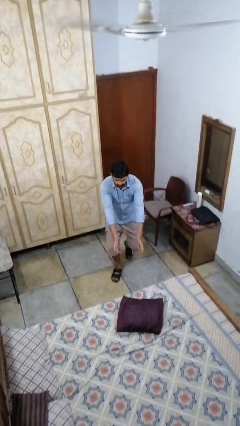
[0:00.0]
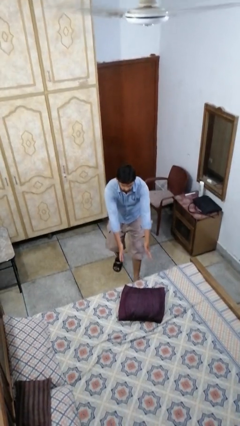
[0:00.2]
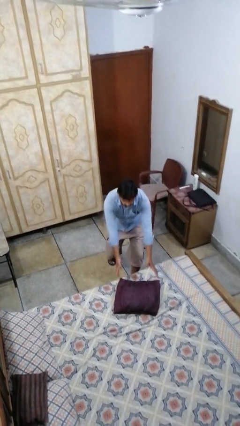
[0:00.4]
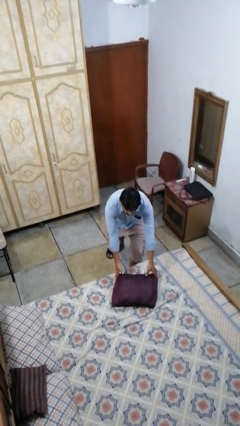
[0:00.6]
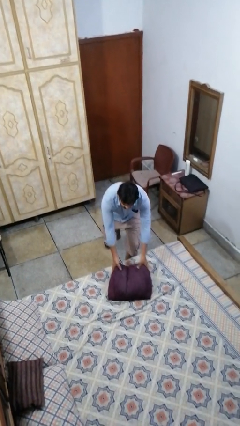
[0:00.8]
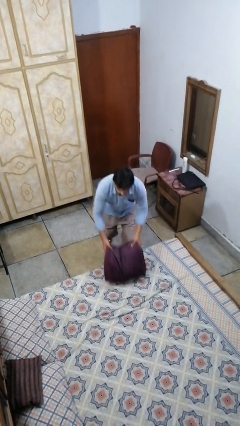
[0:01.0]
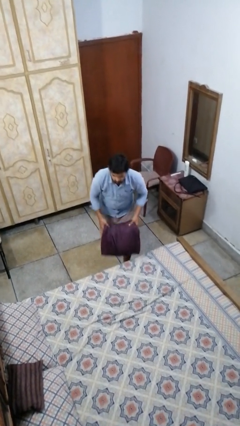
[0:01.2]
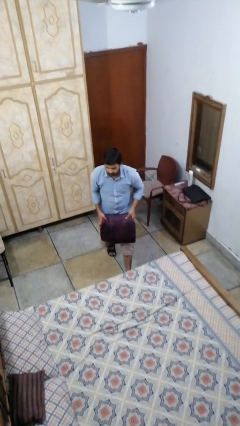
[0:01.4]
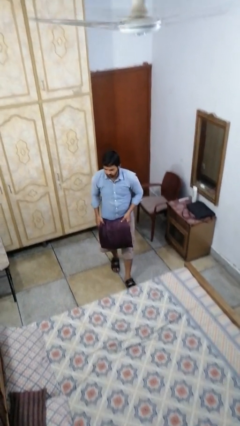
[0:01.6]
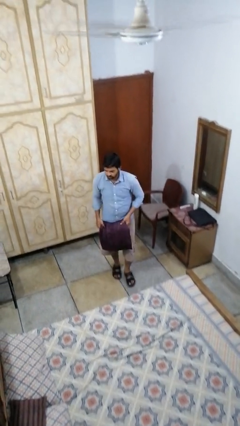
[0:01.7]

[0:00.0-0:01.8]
person picks up object from bed

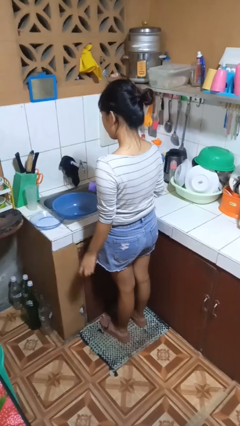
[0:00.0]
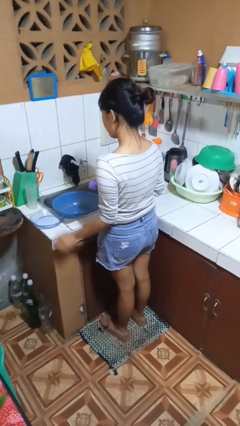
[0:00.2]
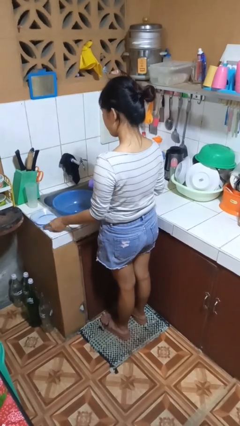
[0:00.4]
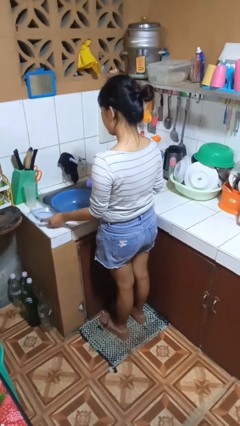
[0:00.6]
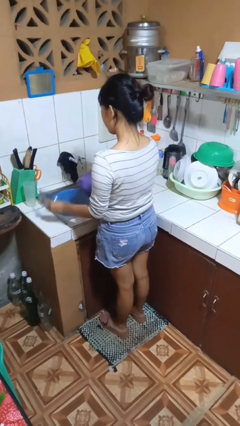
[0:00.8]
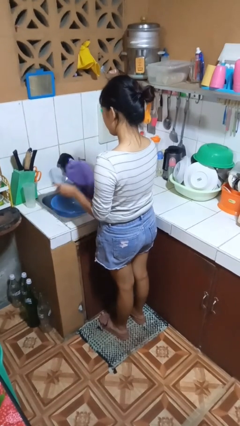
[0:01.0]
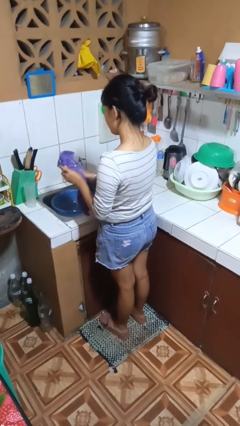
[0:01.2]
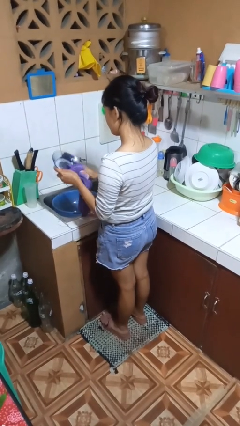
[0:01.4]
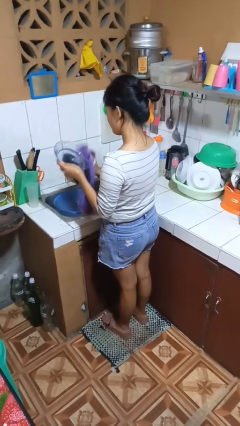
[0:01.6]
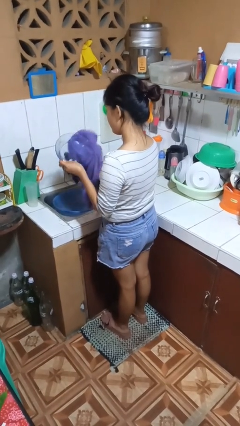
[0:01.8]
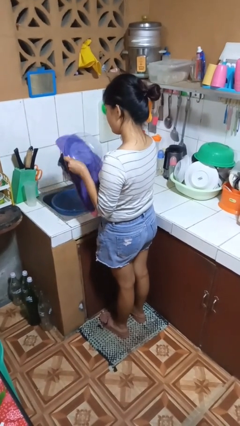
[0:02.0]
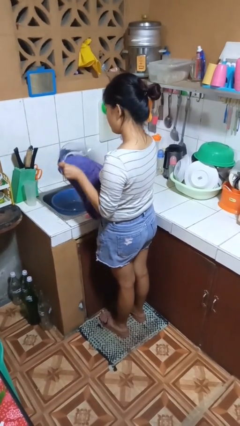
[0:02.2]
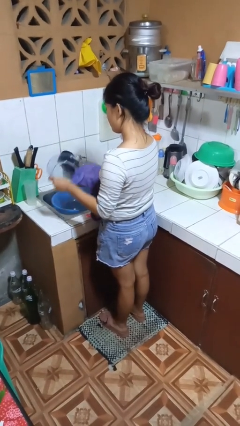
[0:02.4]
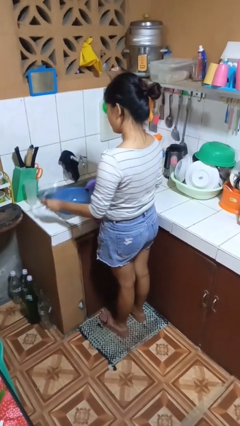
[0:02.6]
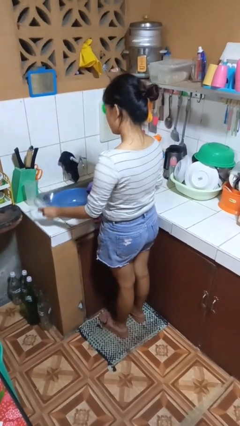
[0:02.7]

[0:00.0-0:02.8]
person dries dish

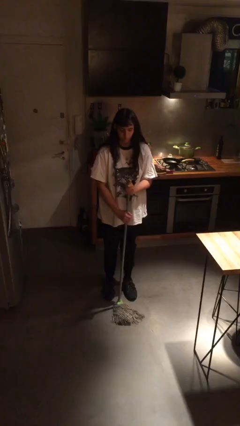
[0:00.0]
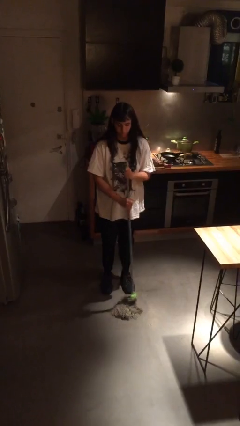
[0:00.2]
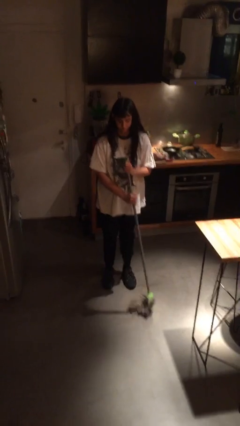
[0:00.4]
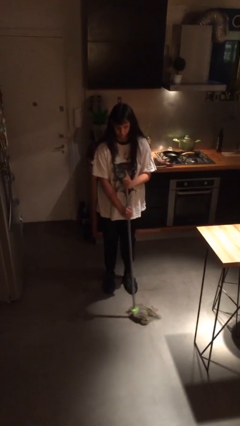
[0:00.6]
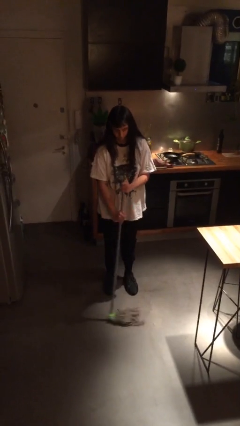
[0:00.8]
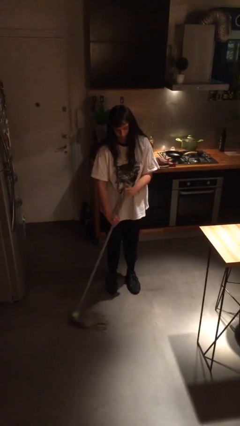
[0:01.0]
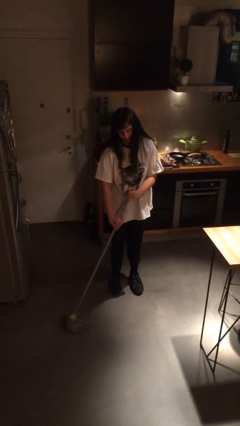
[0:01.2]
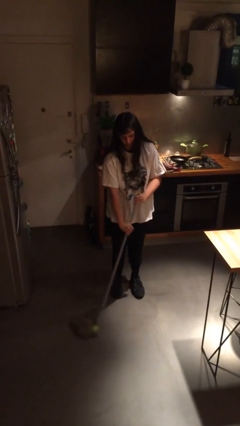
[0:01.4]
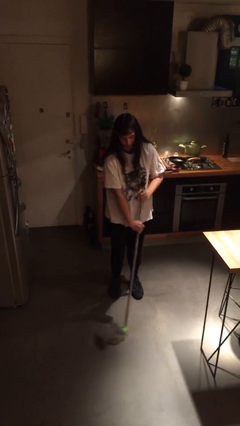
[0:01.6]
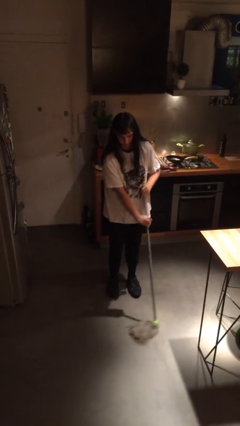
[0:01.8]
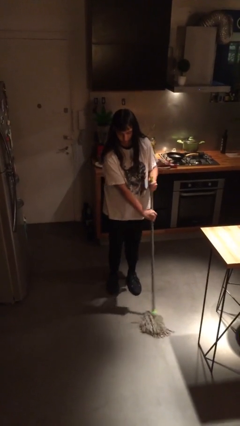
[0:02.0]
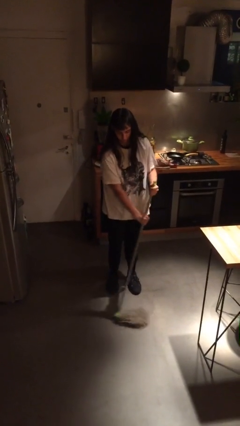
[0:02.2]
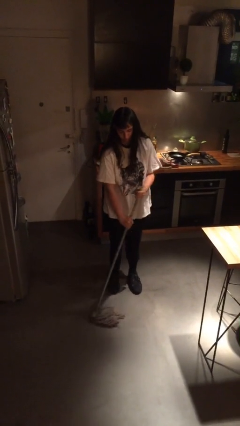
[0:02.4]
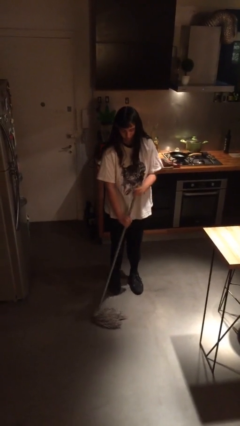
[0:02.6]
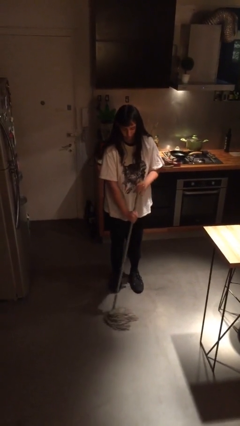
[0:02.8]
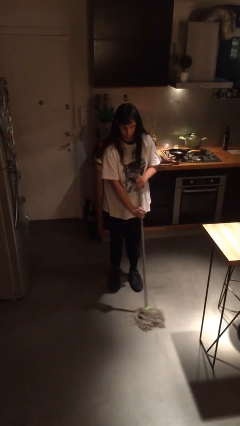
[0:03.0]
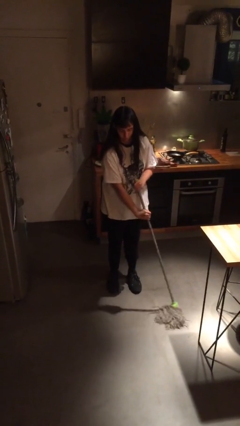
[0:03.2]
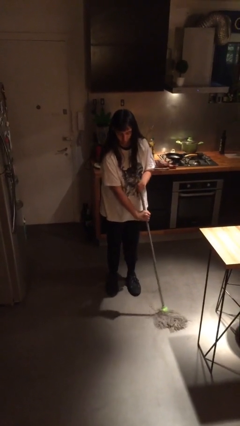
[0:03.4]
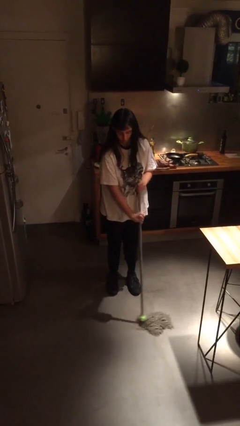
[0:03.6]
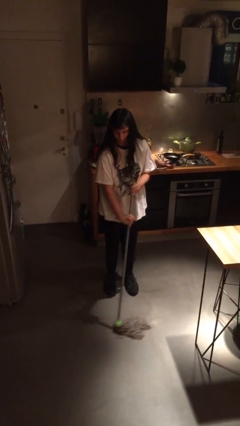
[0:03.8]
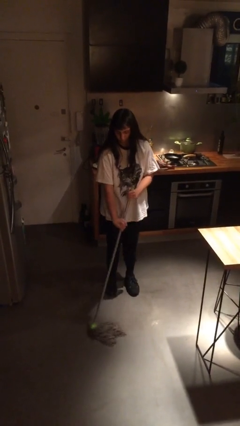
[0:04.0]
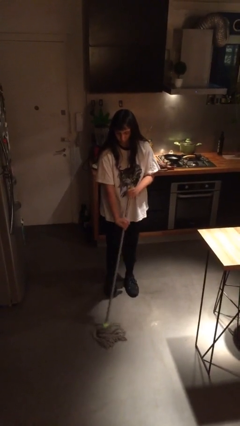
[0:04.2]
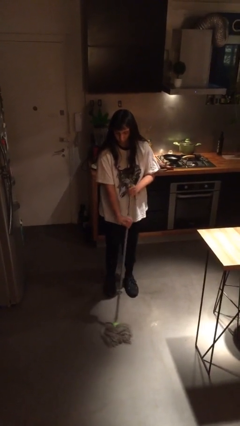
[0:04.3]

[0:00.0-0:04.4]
person mops

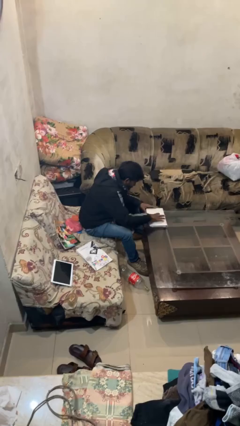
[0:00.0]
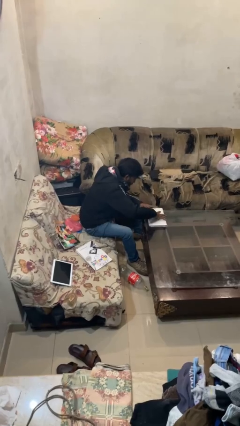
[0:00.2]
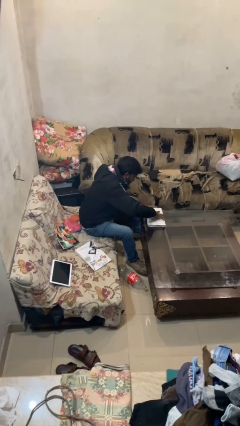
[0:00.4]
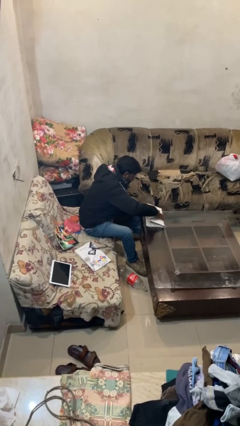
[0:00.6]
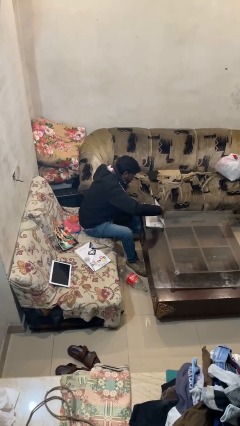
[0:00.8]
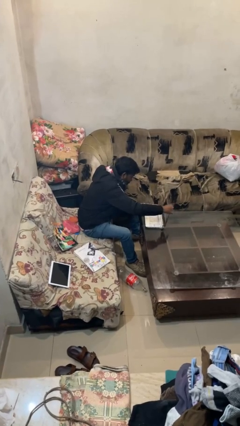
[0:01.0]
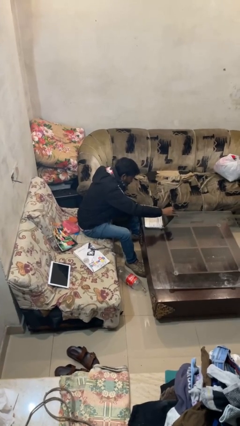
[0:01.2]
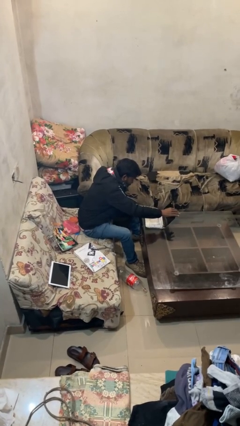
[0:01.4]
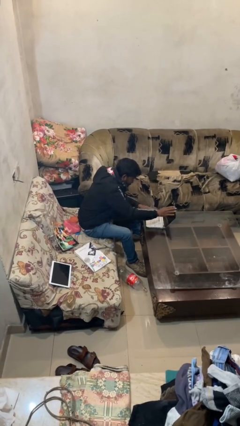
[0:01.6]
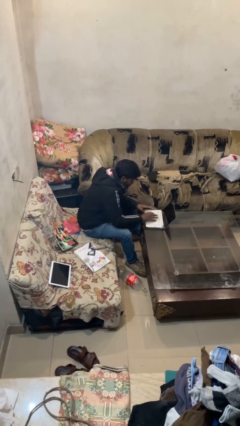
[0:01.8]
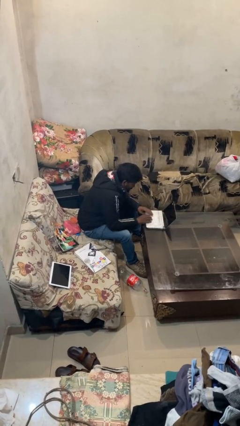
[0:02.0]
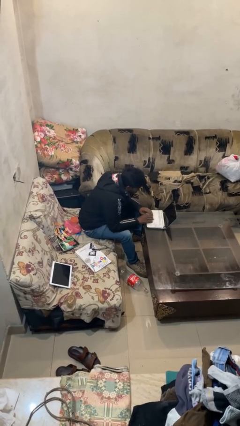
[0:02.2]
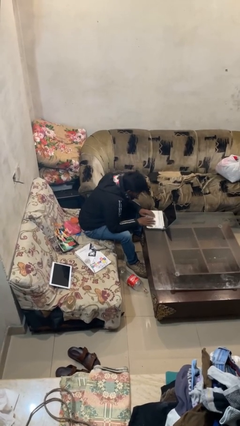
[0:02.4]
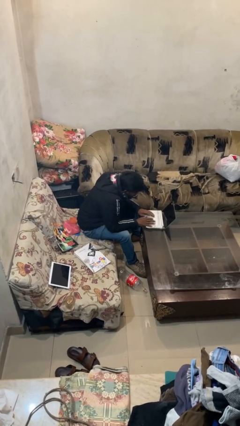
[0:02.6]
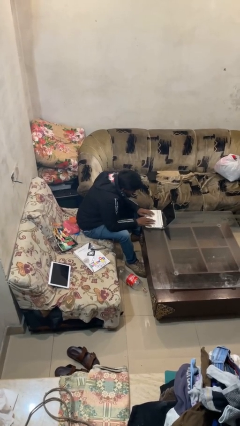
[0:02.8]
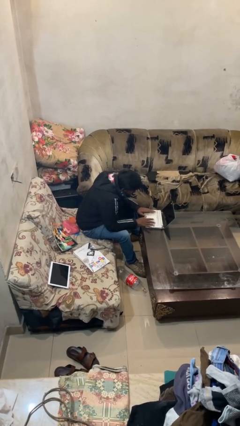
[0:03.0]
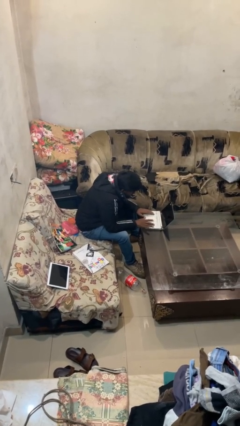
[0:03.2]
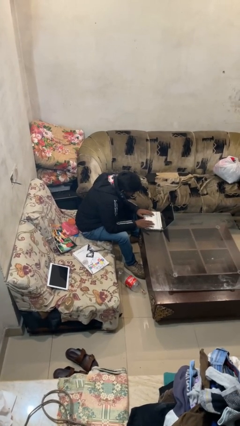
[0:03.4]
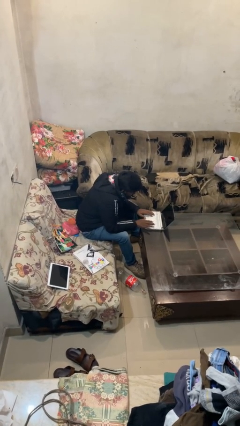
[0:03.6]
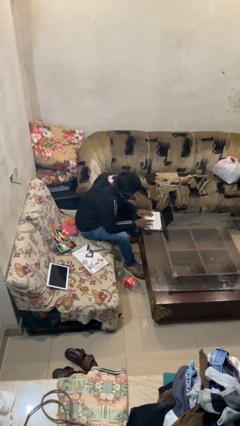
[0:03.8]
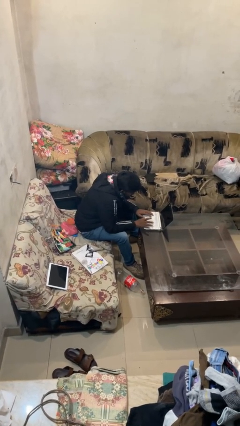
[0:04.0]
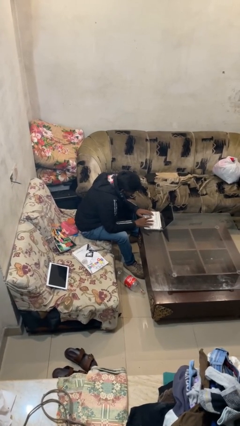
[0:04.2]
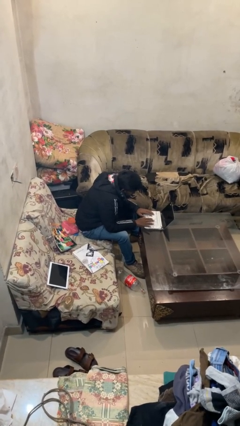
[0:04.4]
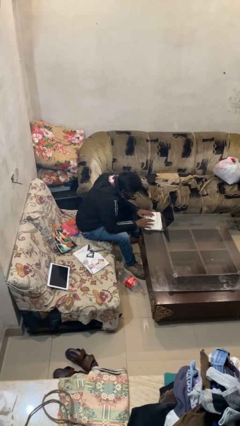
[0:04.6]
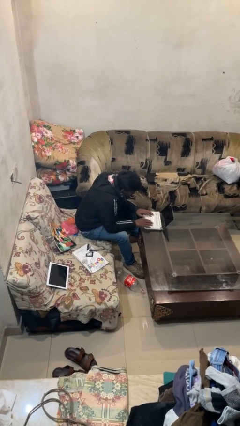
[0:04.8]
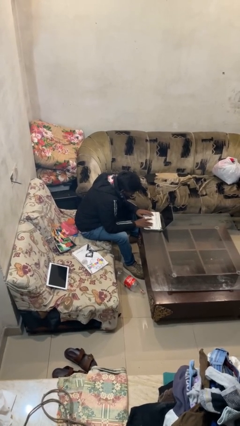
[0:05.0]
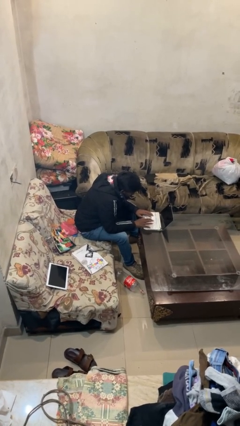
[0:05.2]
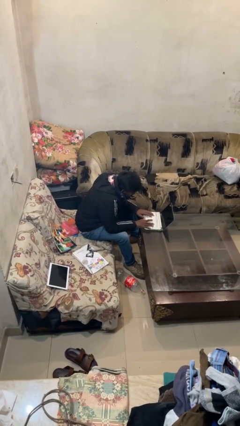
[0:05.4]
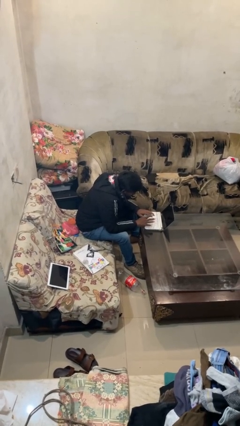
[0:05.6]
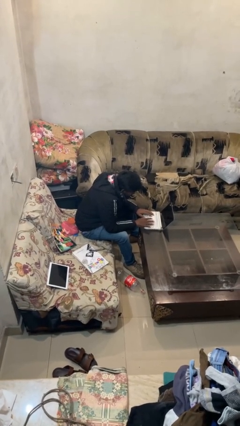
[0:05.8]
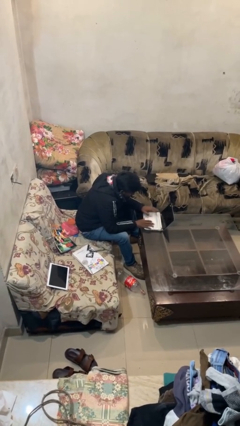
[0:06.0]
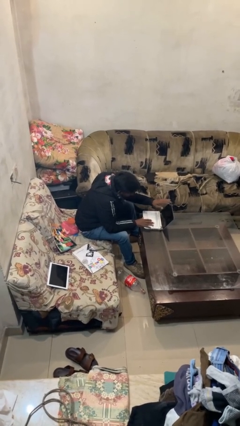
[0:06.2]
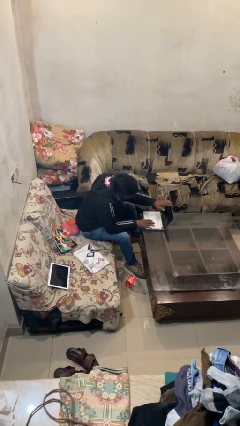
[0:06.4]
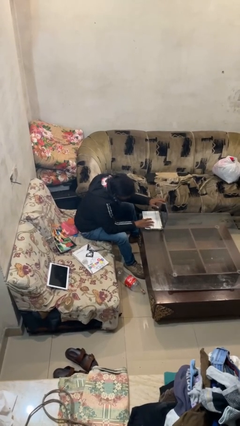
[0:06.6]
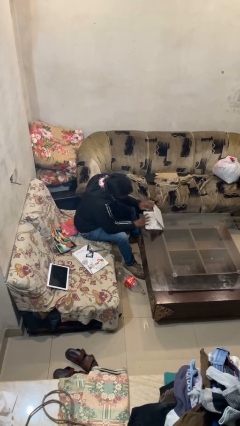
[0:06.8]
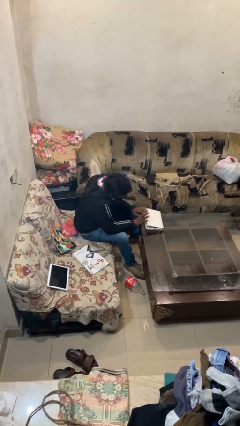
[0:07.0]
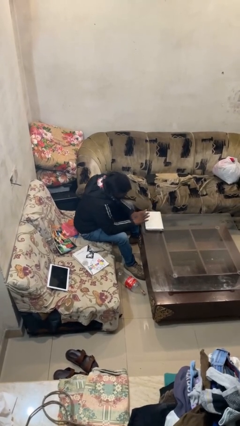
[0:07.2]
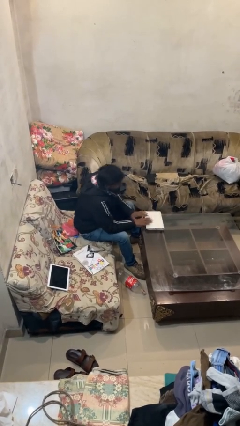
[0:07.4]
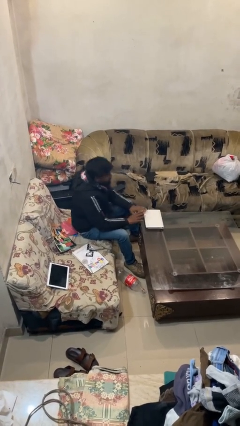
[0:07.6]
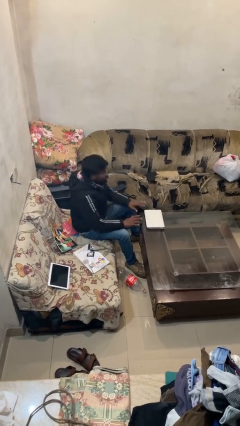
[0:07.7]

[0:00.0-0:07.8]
person interacts with laptop

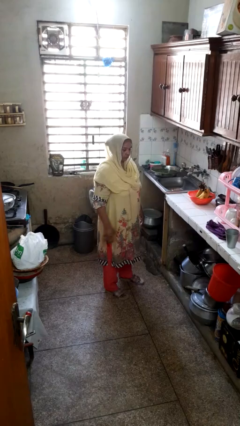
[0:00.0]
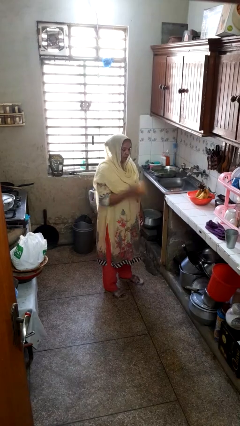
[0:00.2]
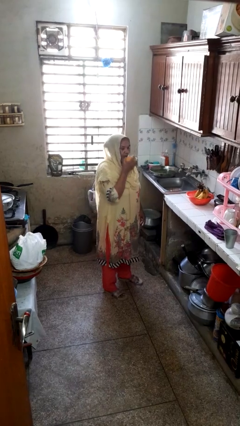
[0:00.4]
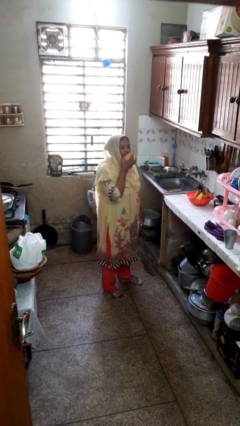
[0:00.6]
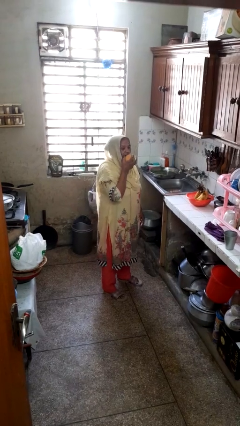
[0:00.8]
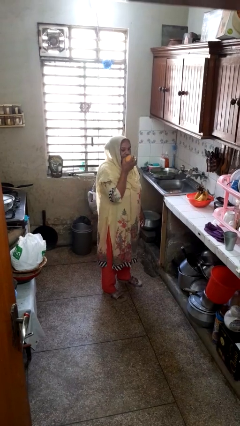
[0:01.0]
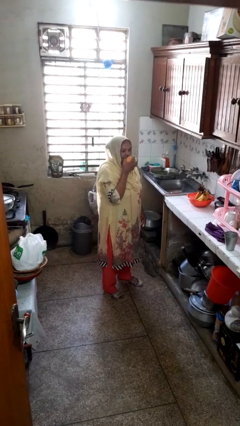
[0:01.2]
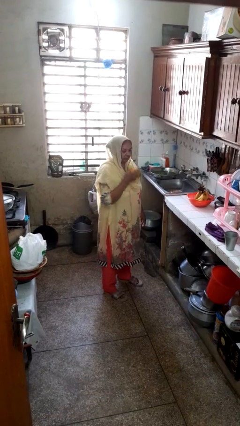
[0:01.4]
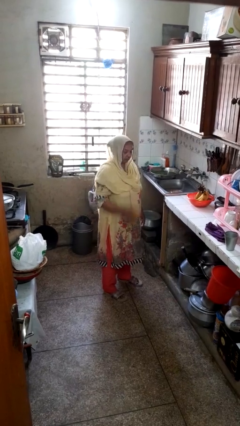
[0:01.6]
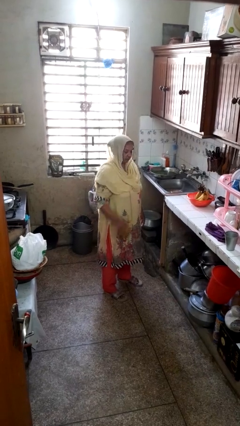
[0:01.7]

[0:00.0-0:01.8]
person eats apple
